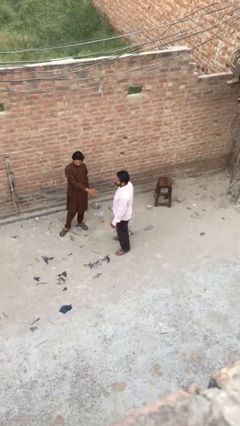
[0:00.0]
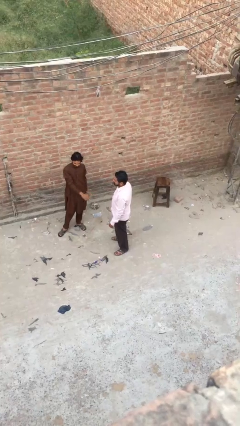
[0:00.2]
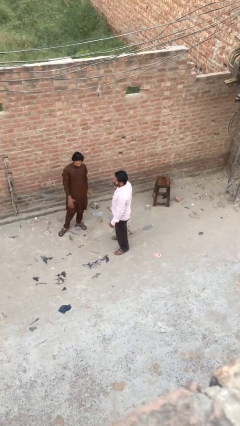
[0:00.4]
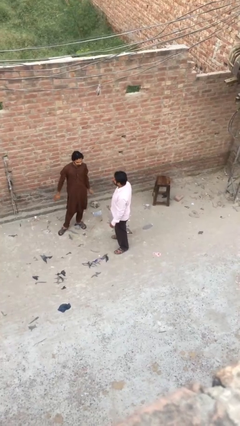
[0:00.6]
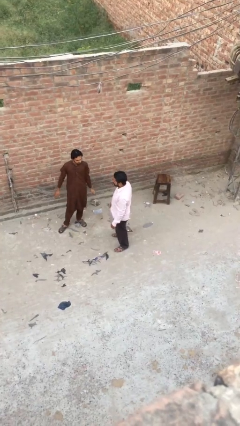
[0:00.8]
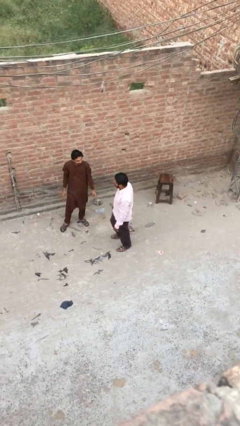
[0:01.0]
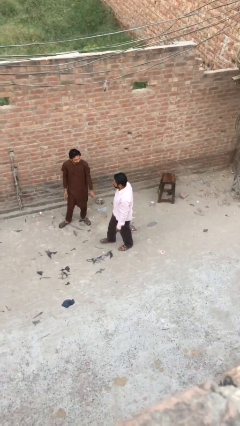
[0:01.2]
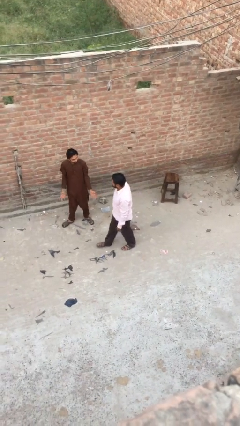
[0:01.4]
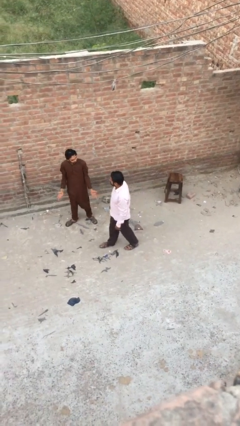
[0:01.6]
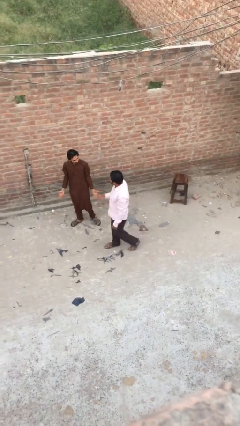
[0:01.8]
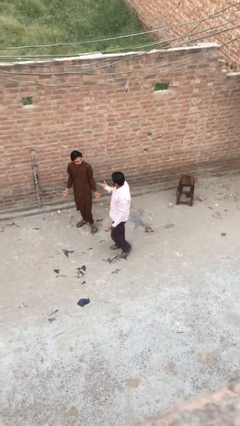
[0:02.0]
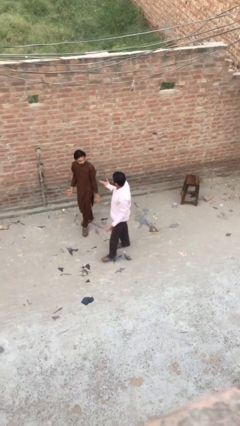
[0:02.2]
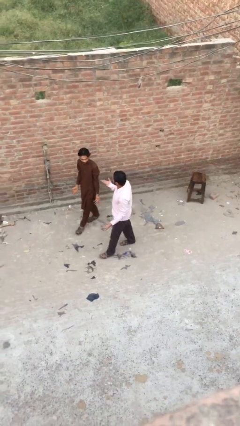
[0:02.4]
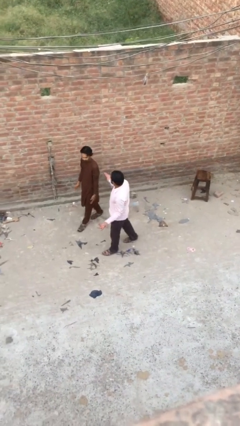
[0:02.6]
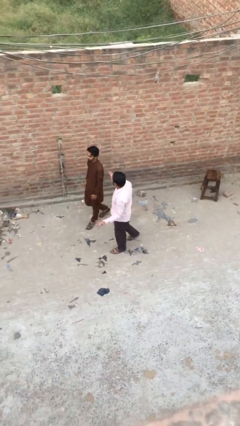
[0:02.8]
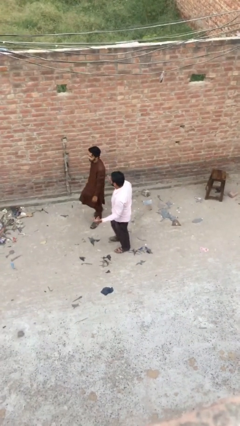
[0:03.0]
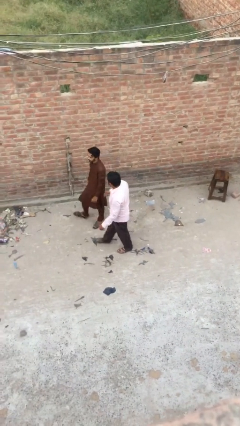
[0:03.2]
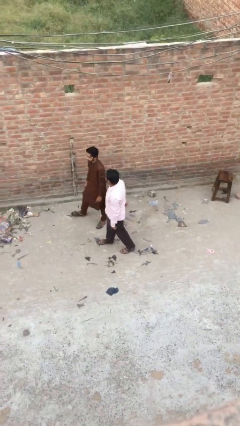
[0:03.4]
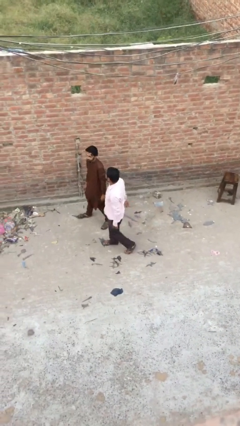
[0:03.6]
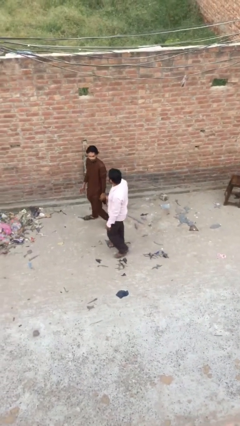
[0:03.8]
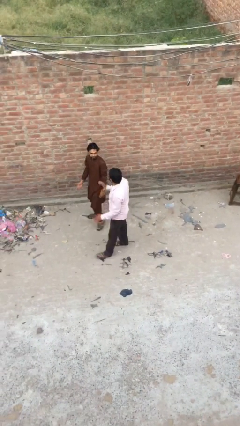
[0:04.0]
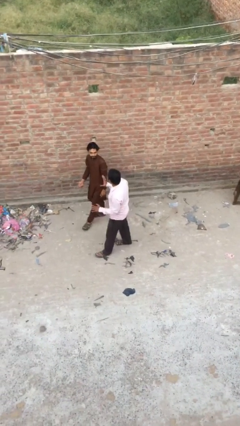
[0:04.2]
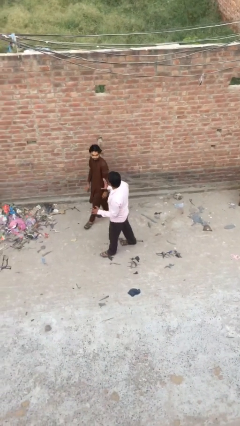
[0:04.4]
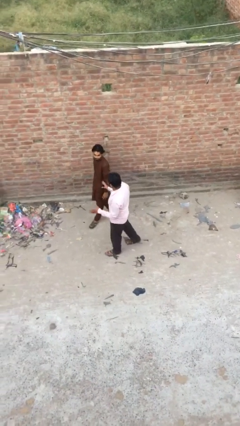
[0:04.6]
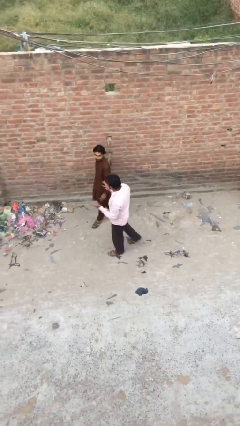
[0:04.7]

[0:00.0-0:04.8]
person talks to person

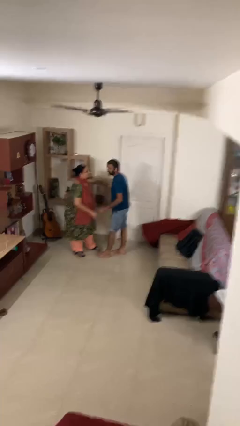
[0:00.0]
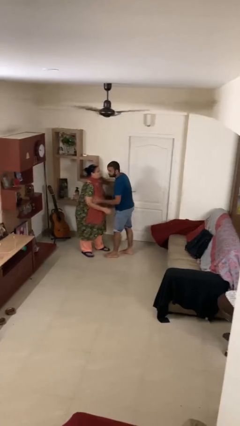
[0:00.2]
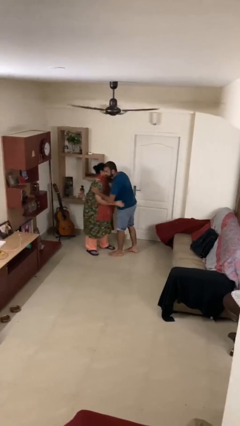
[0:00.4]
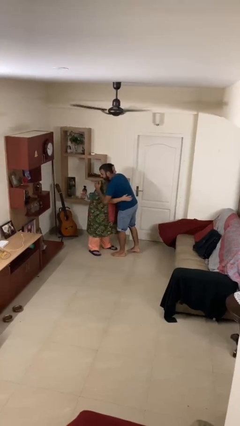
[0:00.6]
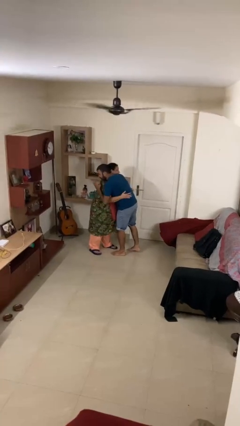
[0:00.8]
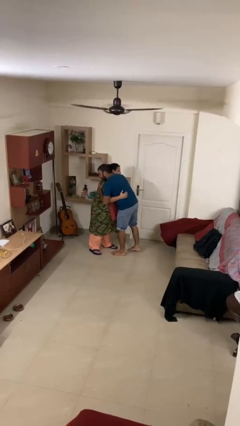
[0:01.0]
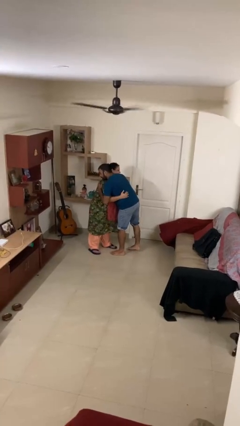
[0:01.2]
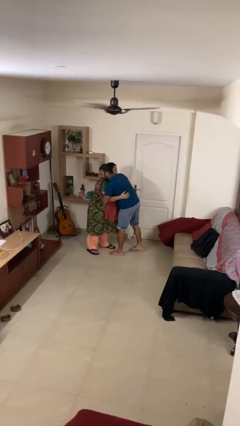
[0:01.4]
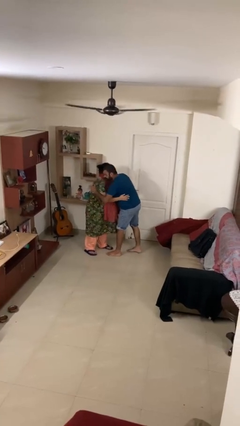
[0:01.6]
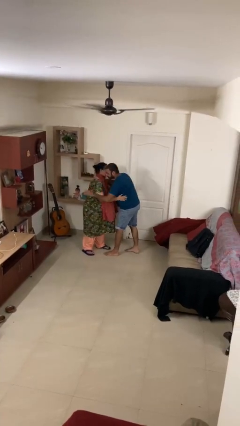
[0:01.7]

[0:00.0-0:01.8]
person embraces person

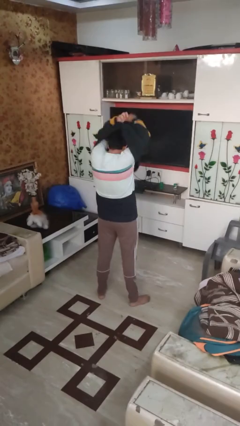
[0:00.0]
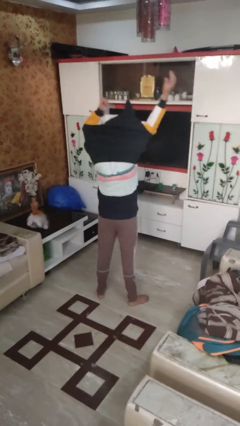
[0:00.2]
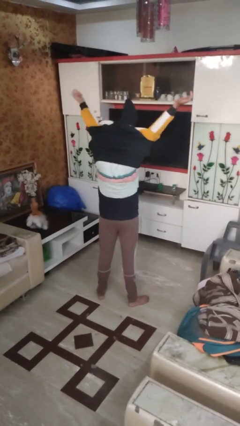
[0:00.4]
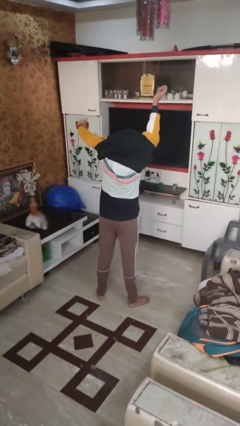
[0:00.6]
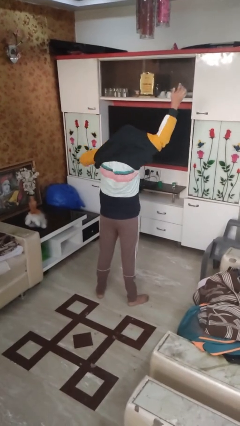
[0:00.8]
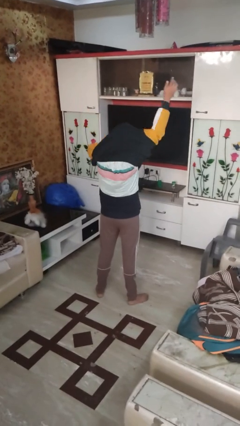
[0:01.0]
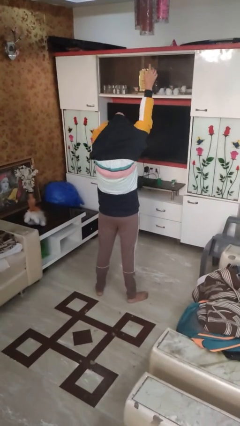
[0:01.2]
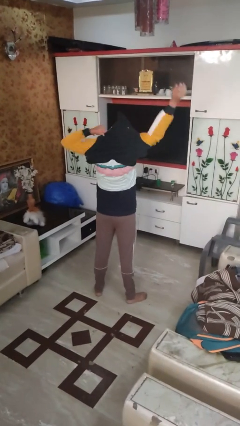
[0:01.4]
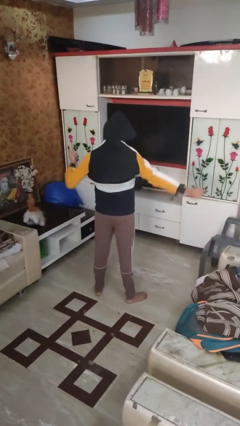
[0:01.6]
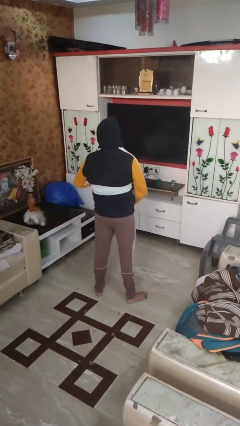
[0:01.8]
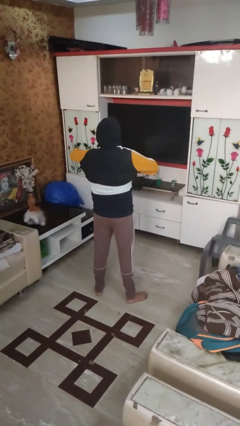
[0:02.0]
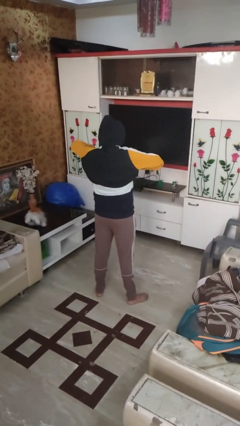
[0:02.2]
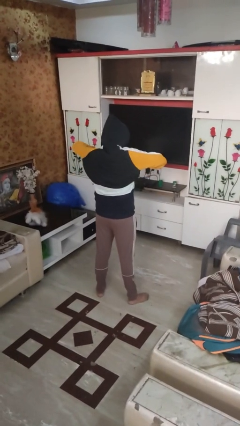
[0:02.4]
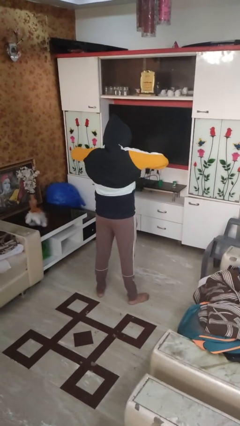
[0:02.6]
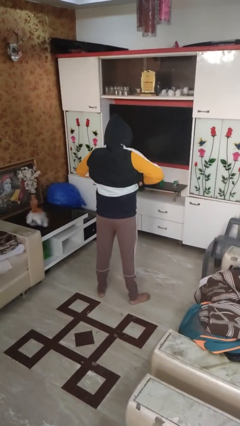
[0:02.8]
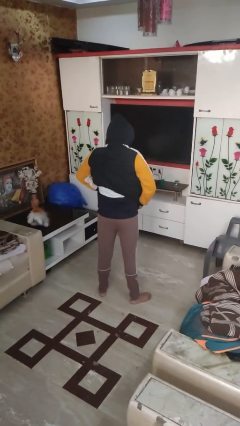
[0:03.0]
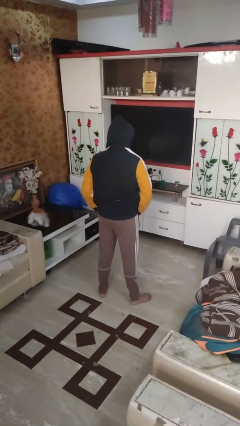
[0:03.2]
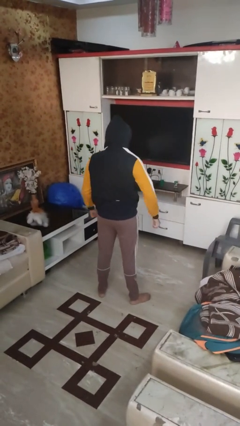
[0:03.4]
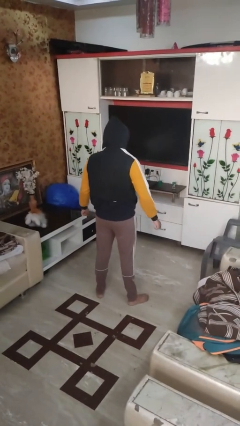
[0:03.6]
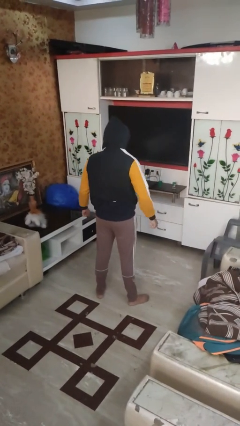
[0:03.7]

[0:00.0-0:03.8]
person puts on hoodie

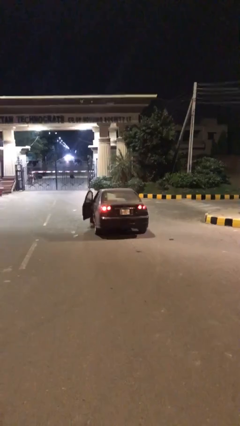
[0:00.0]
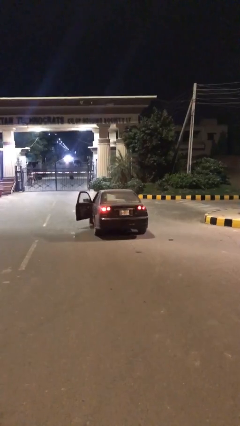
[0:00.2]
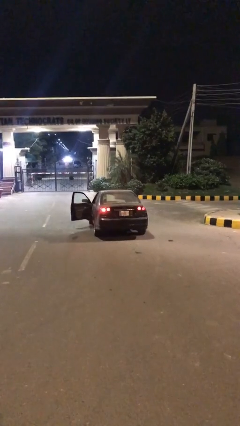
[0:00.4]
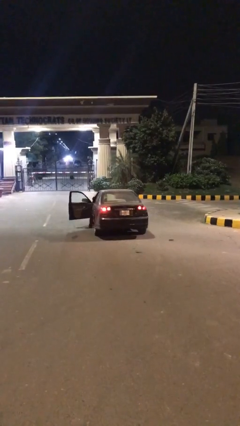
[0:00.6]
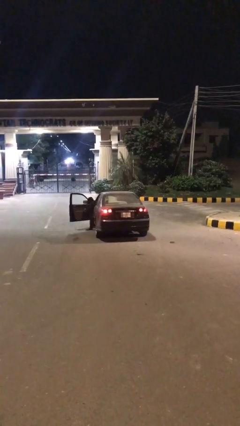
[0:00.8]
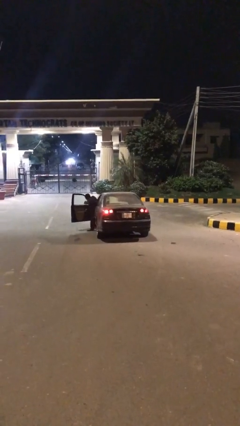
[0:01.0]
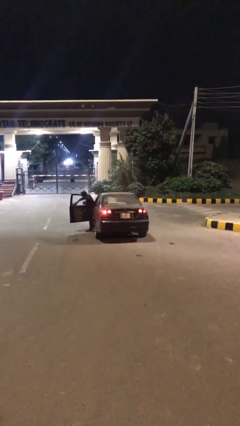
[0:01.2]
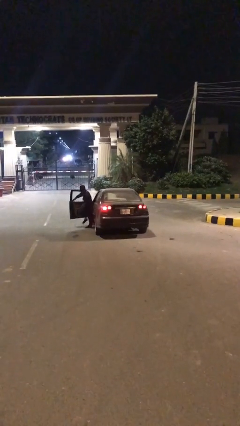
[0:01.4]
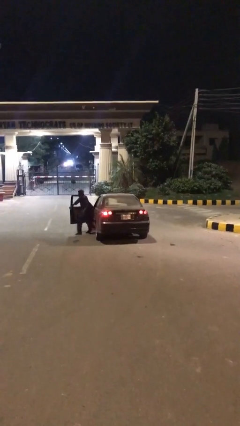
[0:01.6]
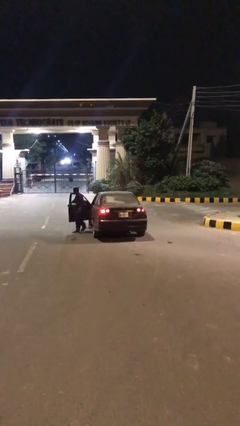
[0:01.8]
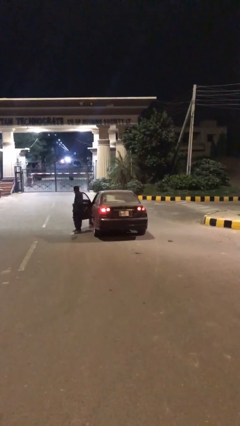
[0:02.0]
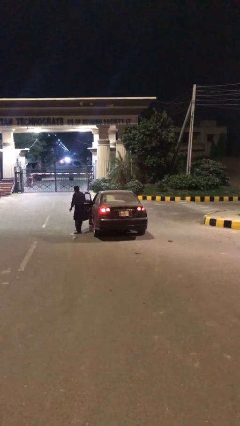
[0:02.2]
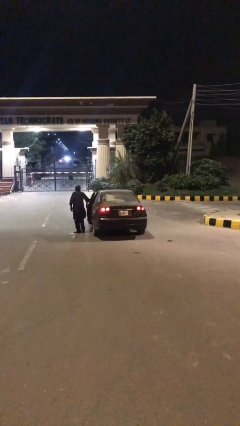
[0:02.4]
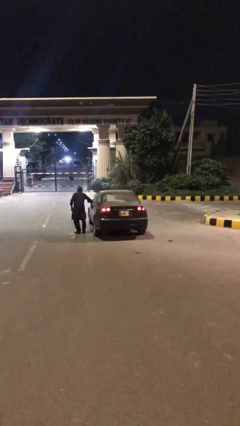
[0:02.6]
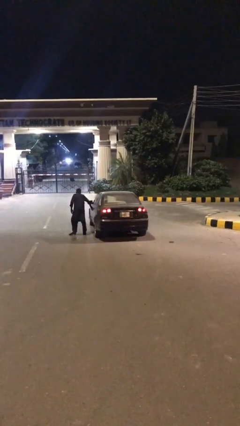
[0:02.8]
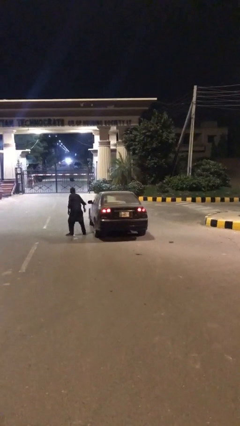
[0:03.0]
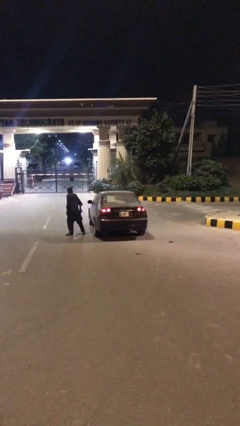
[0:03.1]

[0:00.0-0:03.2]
car drops off person

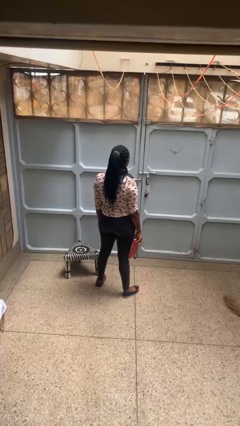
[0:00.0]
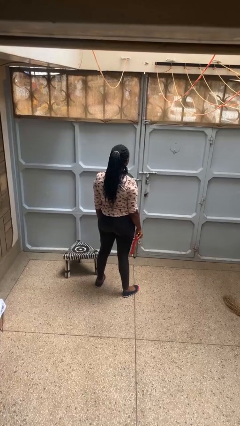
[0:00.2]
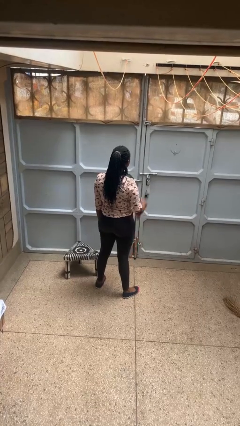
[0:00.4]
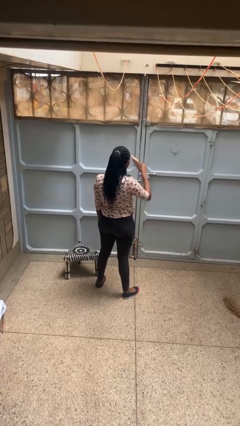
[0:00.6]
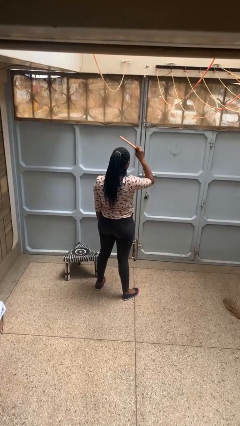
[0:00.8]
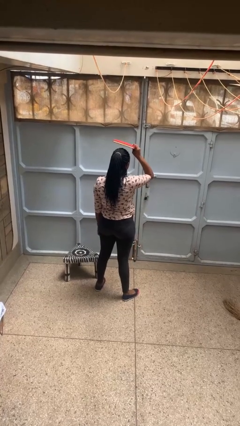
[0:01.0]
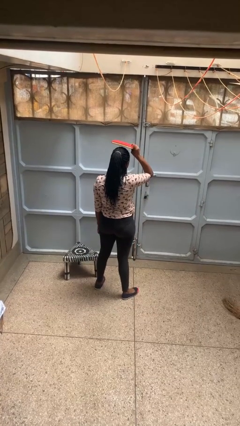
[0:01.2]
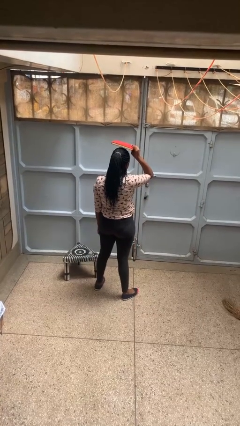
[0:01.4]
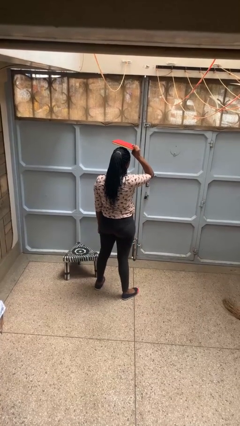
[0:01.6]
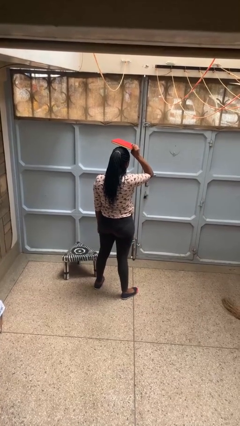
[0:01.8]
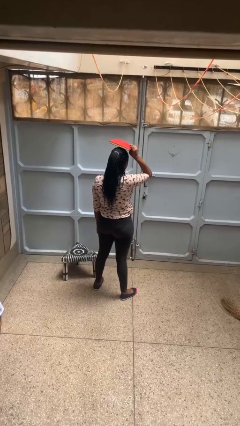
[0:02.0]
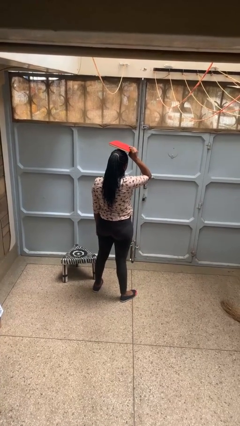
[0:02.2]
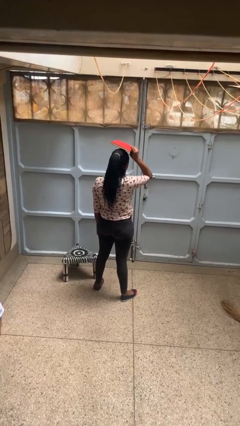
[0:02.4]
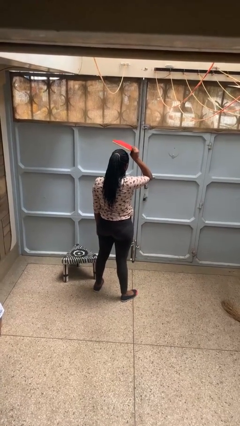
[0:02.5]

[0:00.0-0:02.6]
person holds object above head

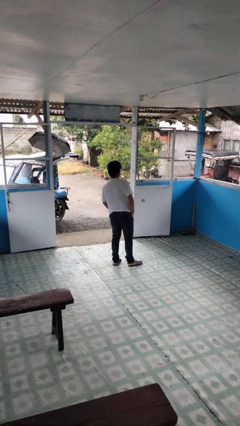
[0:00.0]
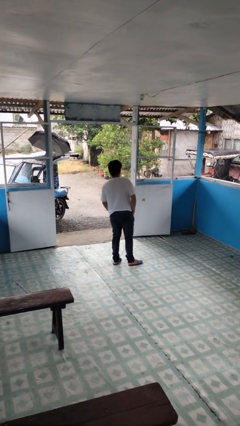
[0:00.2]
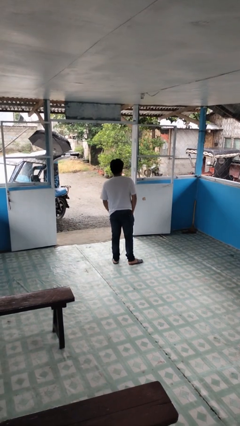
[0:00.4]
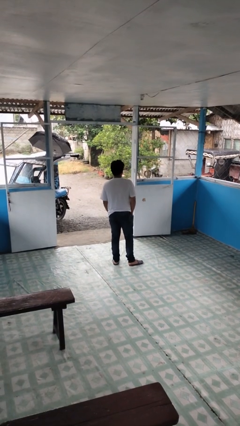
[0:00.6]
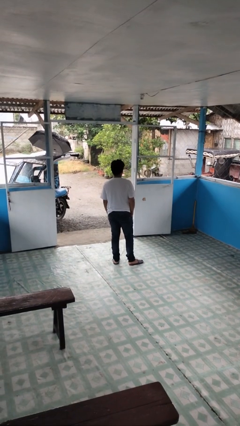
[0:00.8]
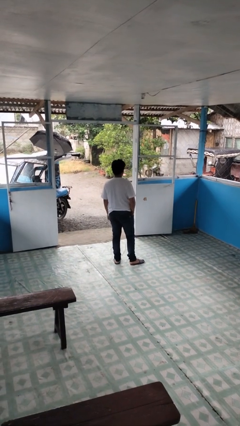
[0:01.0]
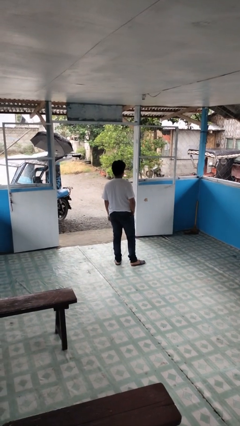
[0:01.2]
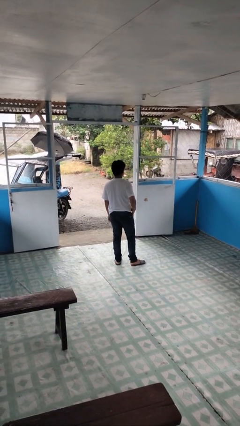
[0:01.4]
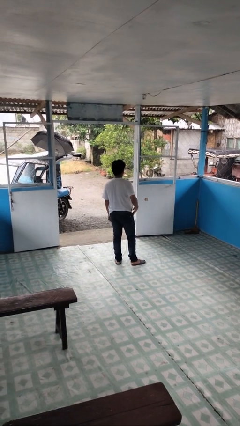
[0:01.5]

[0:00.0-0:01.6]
person puts hands in back pockets
